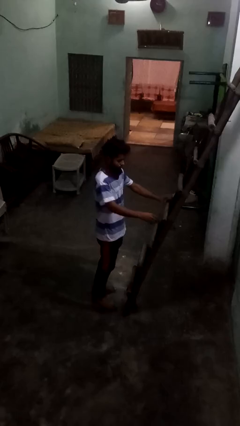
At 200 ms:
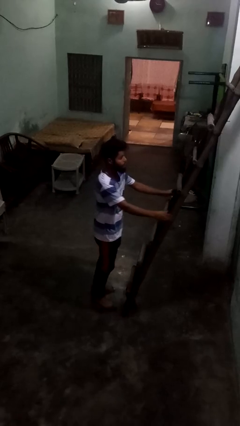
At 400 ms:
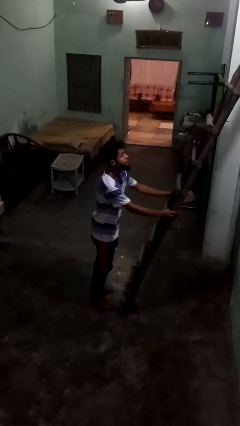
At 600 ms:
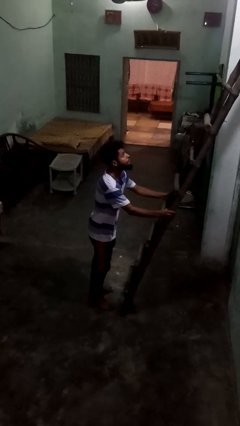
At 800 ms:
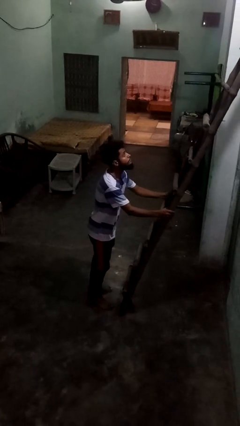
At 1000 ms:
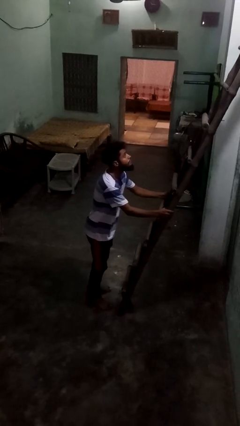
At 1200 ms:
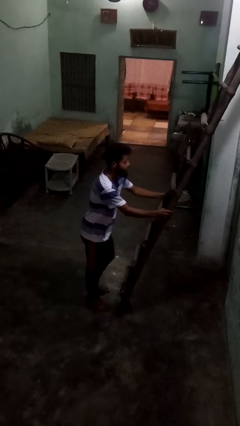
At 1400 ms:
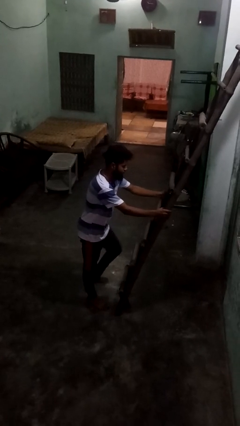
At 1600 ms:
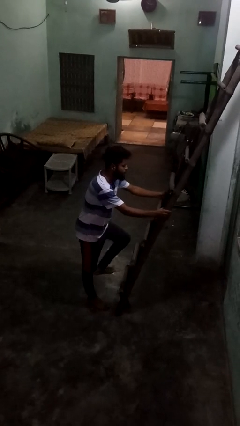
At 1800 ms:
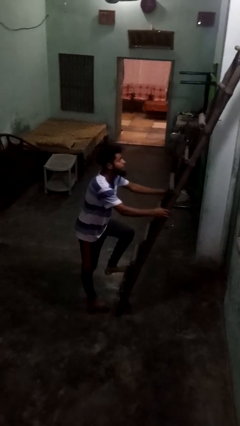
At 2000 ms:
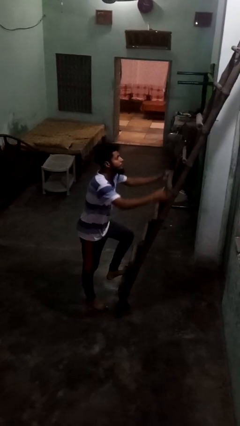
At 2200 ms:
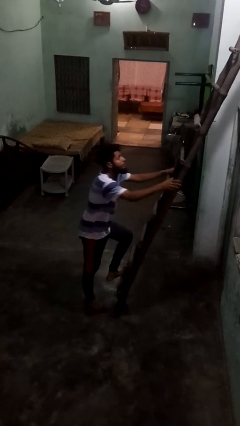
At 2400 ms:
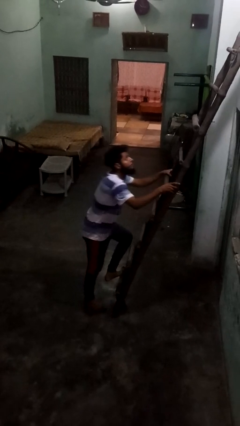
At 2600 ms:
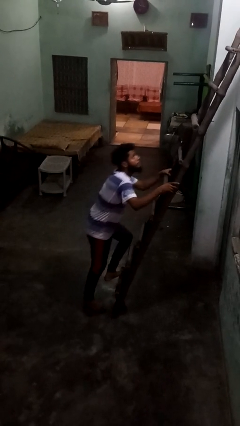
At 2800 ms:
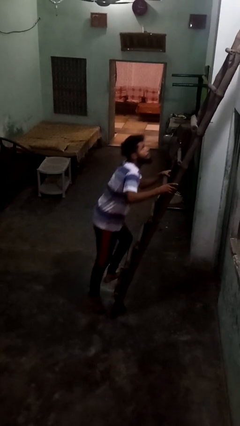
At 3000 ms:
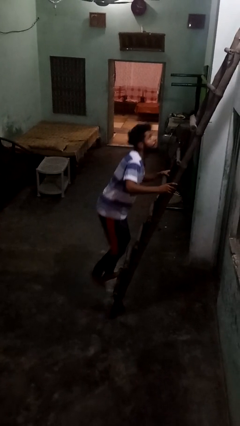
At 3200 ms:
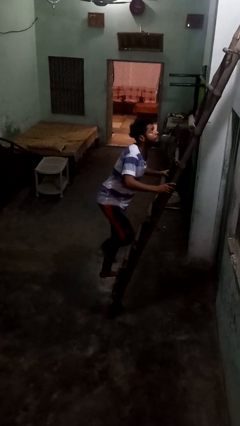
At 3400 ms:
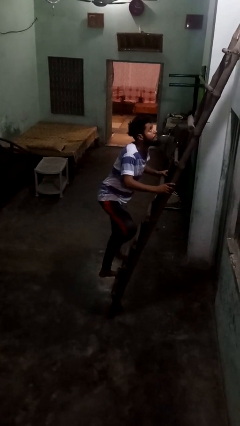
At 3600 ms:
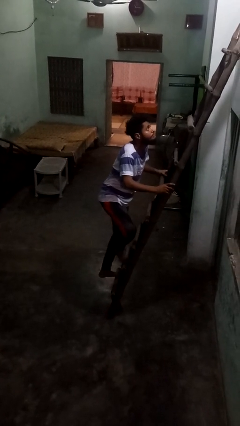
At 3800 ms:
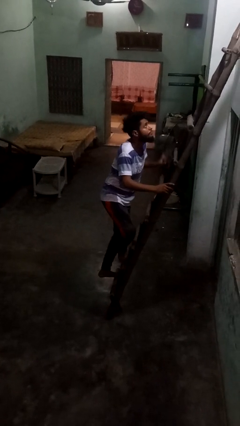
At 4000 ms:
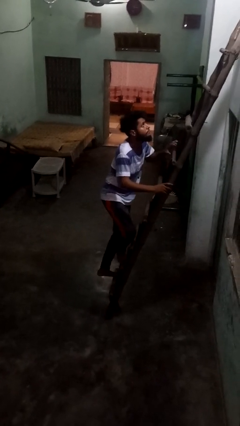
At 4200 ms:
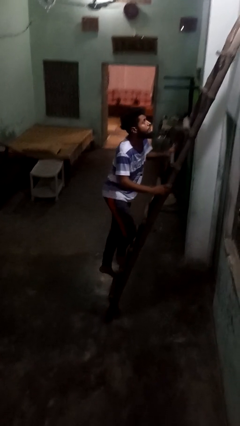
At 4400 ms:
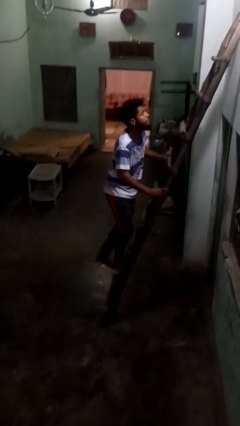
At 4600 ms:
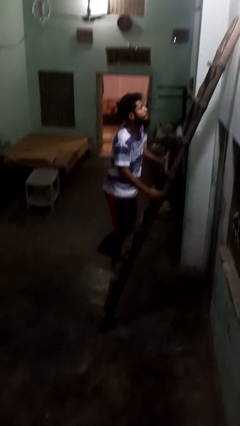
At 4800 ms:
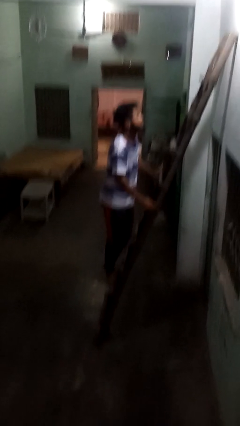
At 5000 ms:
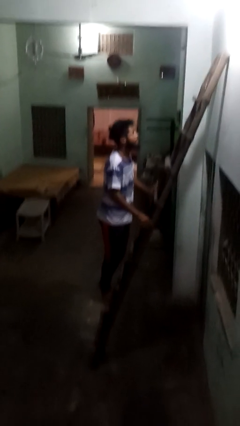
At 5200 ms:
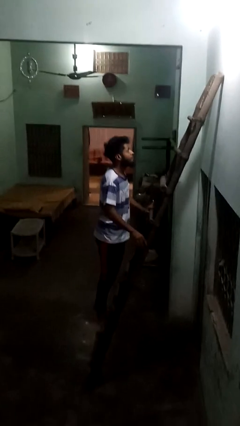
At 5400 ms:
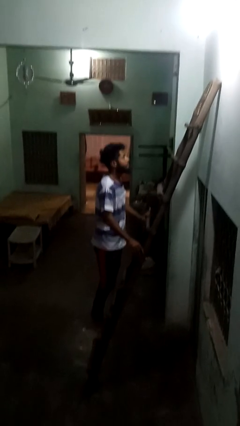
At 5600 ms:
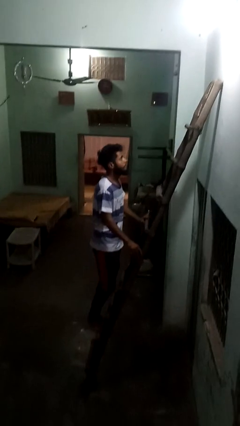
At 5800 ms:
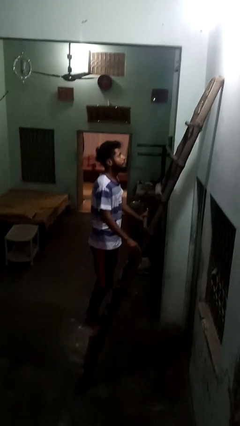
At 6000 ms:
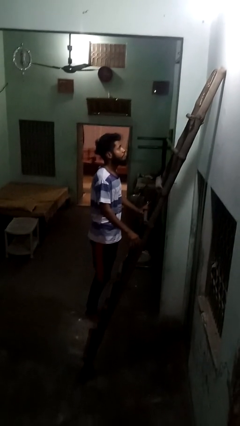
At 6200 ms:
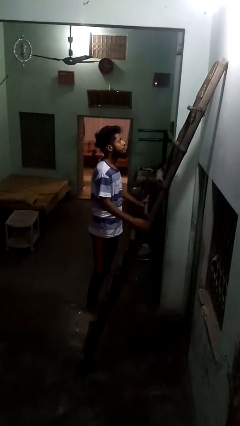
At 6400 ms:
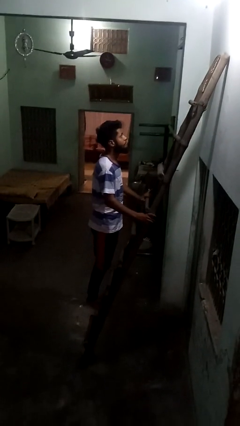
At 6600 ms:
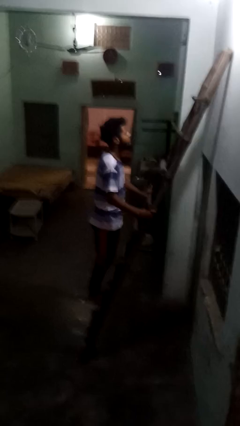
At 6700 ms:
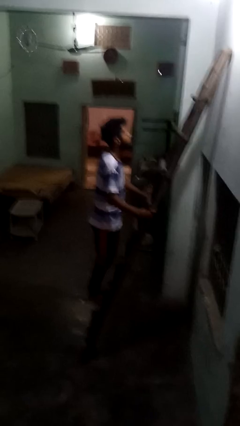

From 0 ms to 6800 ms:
person climbs up ladder

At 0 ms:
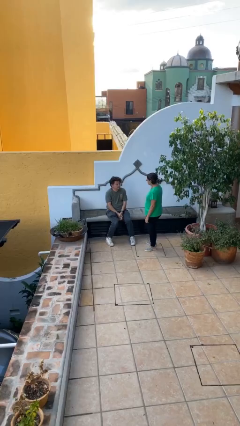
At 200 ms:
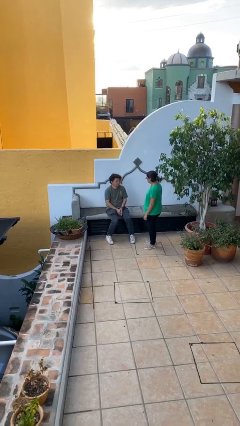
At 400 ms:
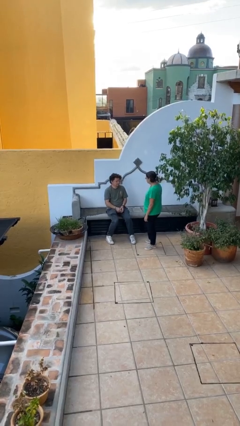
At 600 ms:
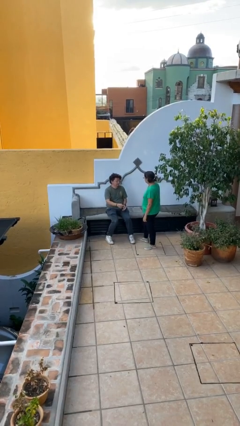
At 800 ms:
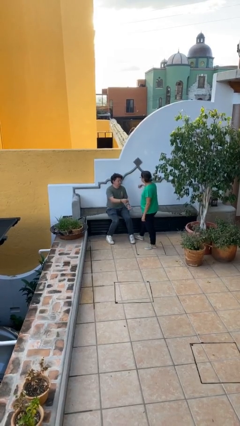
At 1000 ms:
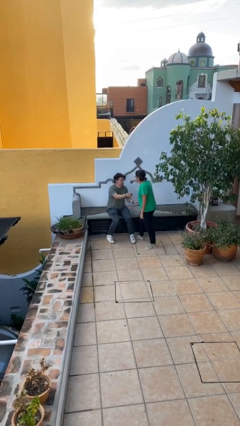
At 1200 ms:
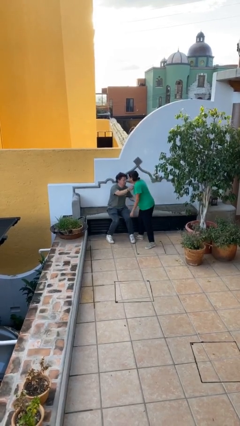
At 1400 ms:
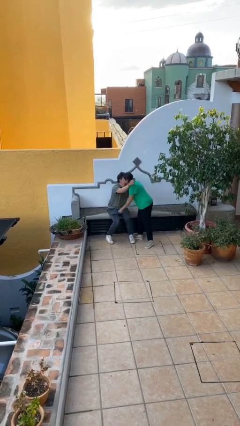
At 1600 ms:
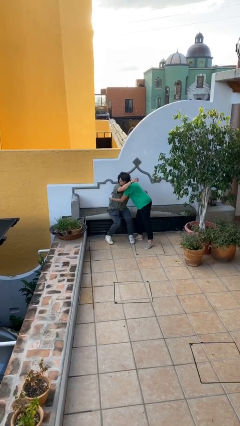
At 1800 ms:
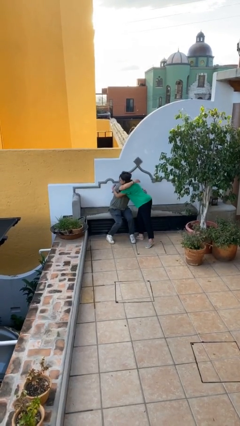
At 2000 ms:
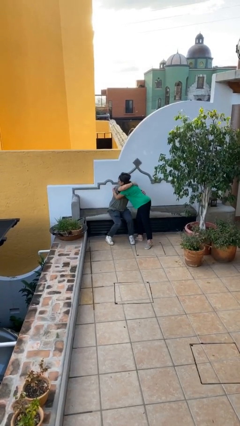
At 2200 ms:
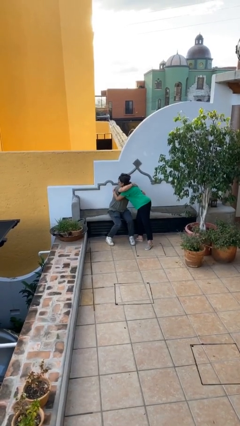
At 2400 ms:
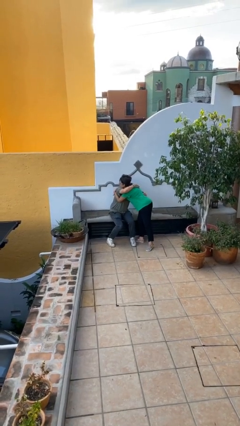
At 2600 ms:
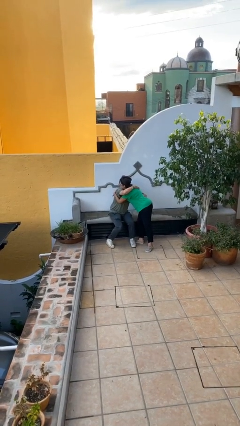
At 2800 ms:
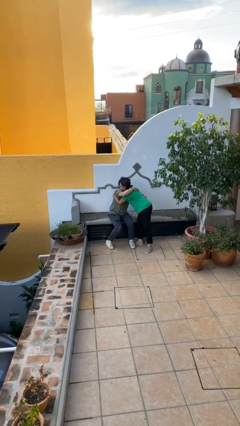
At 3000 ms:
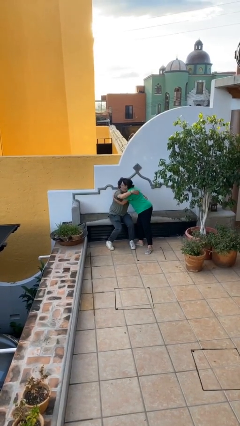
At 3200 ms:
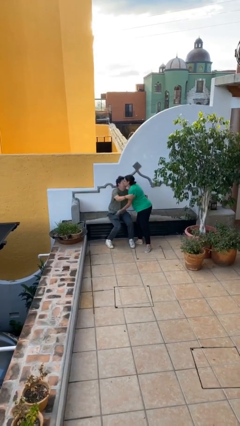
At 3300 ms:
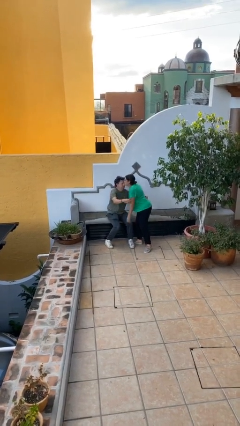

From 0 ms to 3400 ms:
person embraces person

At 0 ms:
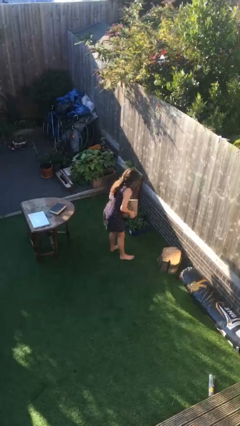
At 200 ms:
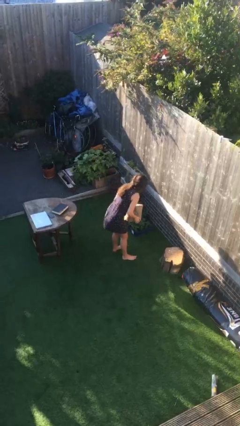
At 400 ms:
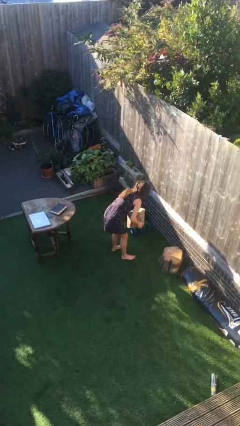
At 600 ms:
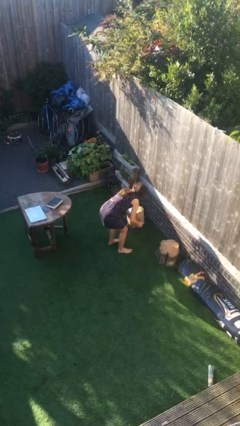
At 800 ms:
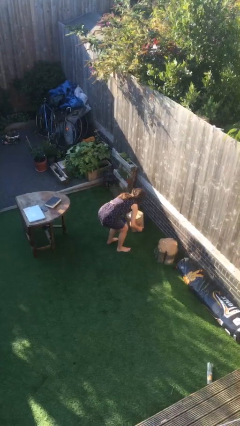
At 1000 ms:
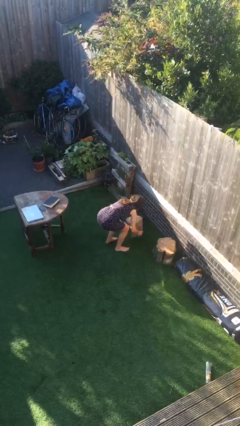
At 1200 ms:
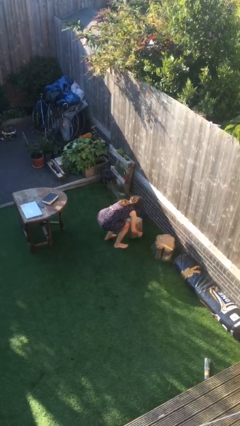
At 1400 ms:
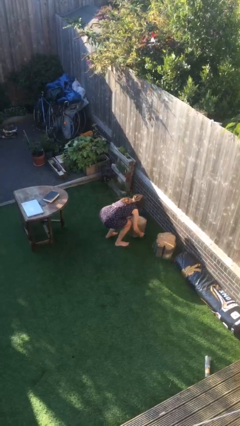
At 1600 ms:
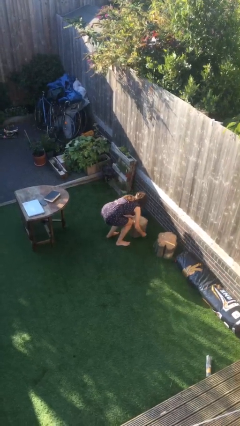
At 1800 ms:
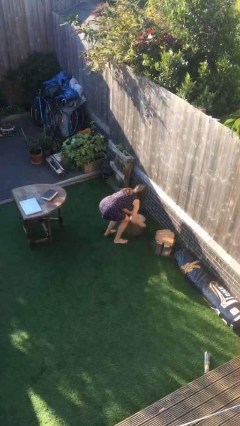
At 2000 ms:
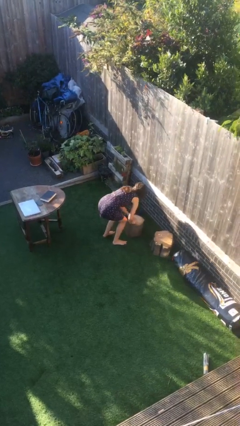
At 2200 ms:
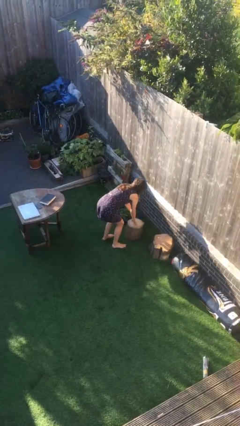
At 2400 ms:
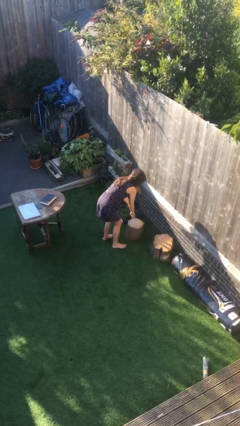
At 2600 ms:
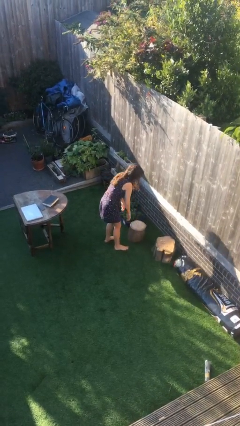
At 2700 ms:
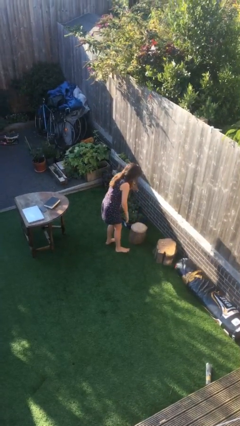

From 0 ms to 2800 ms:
person puts down object on floor

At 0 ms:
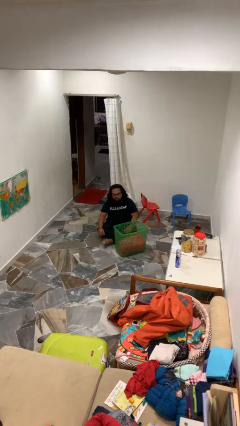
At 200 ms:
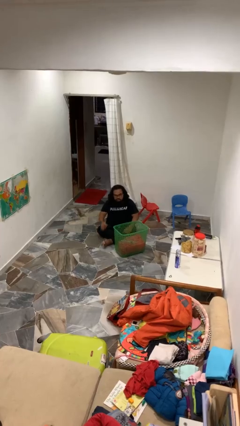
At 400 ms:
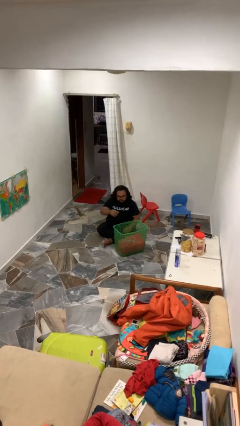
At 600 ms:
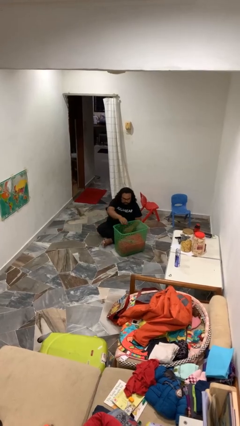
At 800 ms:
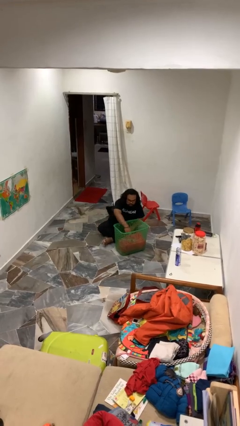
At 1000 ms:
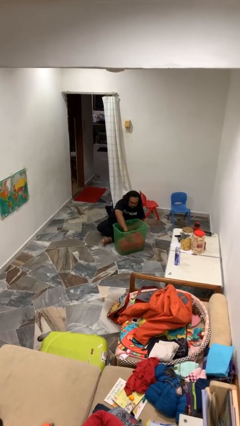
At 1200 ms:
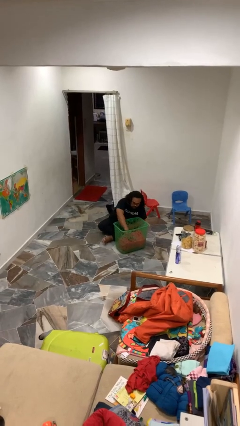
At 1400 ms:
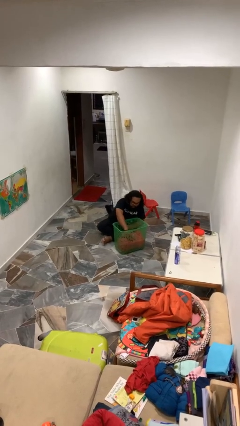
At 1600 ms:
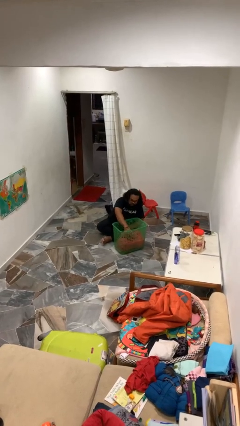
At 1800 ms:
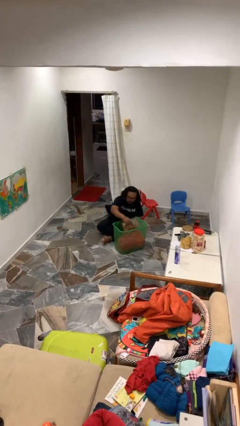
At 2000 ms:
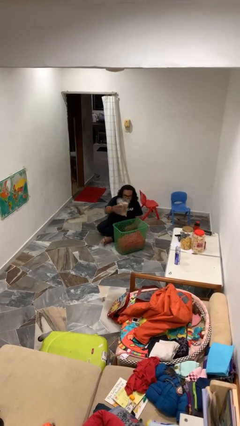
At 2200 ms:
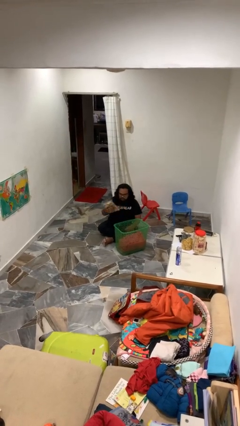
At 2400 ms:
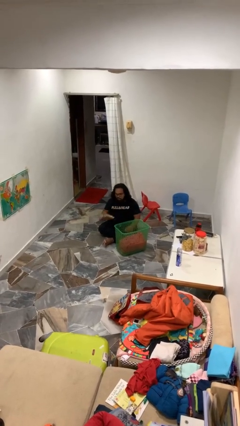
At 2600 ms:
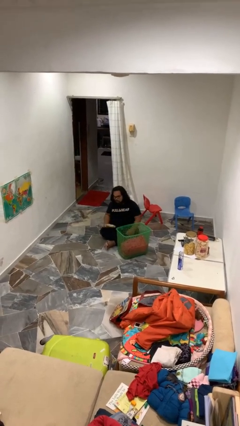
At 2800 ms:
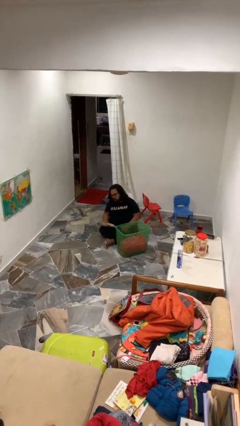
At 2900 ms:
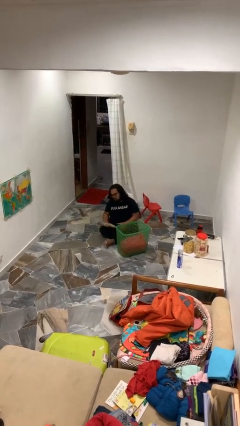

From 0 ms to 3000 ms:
person takes object from basket

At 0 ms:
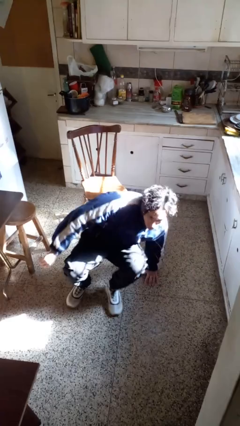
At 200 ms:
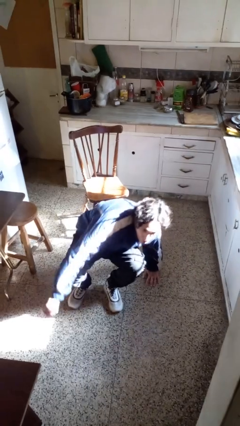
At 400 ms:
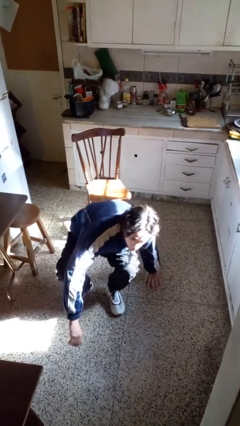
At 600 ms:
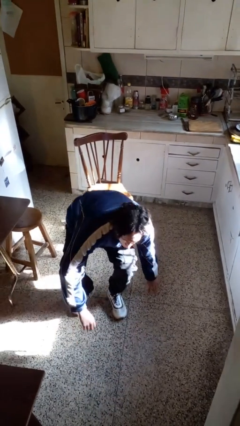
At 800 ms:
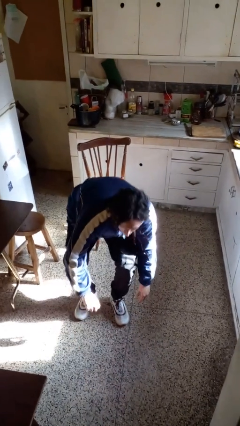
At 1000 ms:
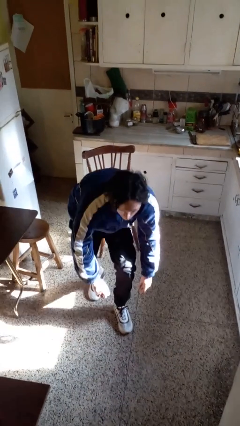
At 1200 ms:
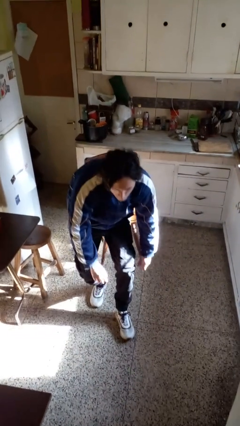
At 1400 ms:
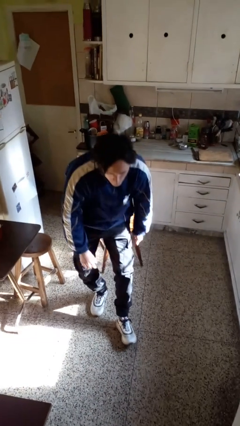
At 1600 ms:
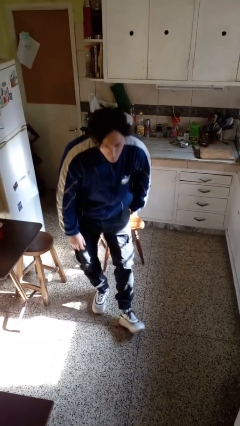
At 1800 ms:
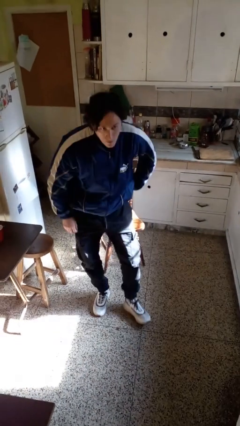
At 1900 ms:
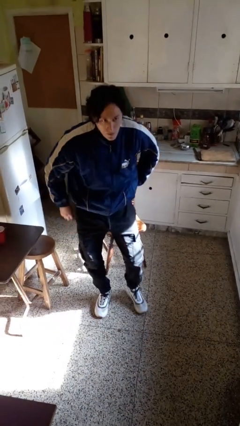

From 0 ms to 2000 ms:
person stands up from floor
